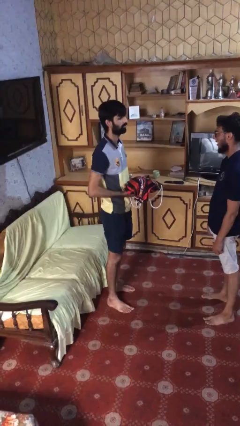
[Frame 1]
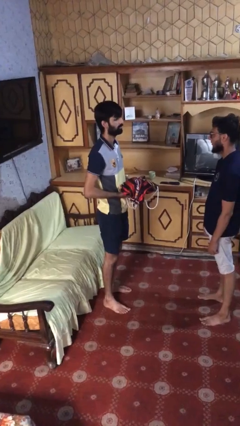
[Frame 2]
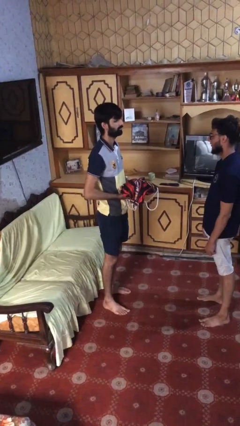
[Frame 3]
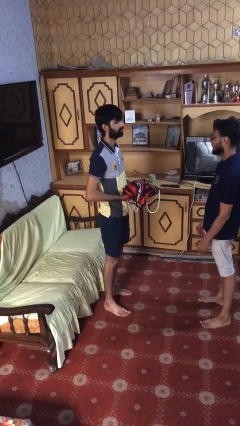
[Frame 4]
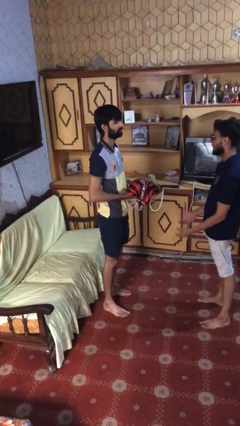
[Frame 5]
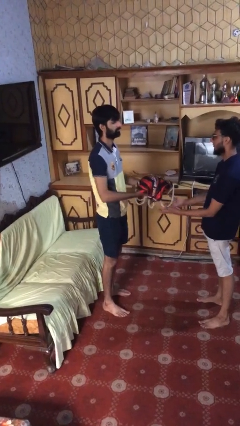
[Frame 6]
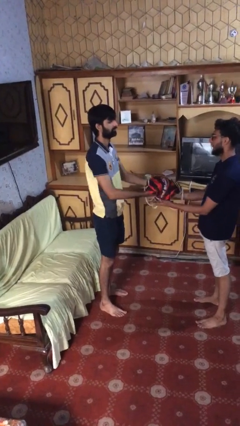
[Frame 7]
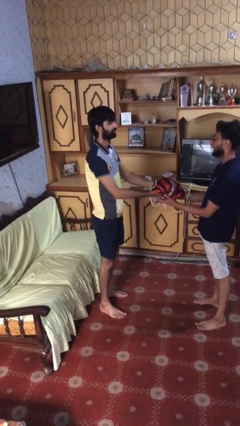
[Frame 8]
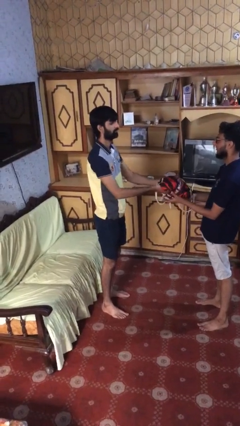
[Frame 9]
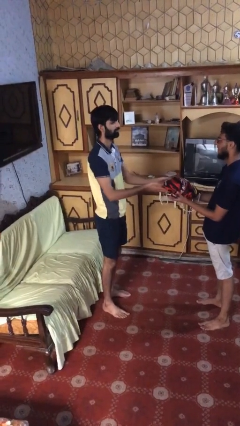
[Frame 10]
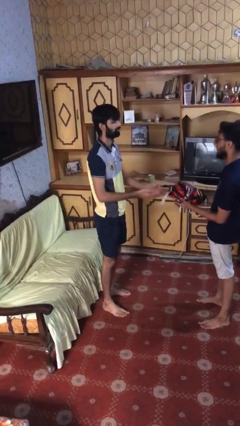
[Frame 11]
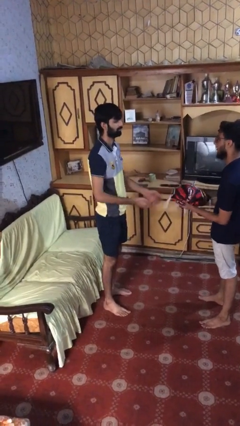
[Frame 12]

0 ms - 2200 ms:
person transfers object to person

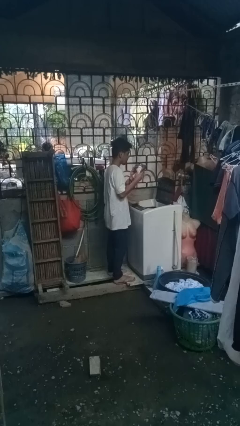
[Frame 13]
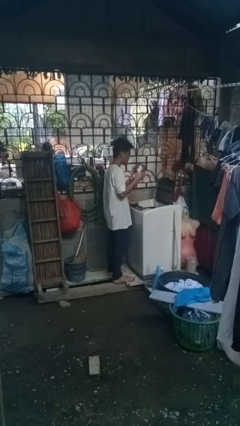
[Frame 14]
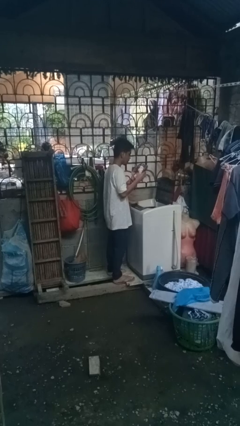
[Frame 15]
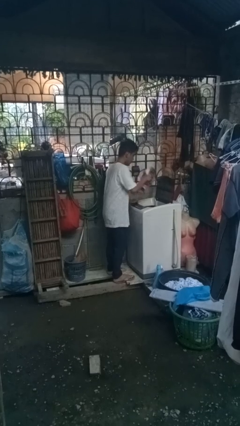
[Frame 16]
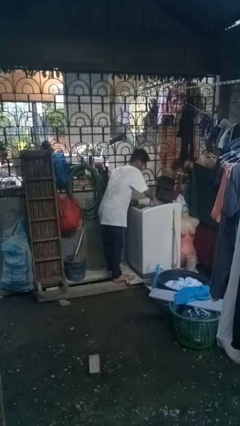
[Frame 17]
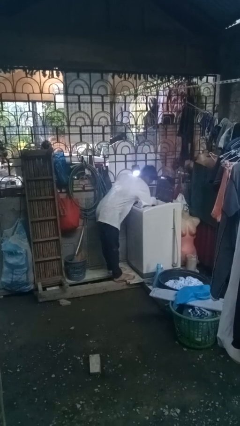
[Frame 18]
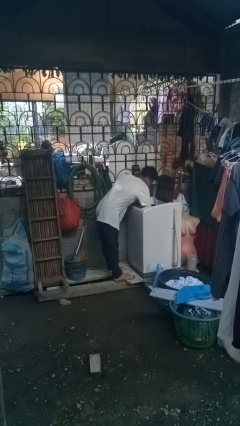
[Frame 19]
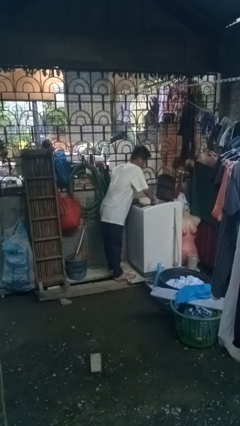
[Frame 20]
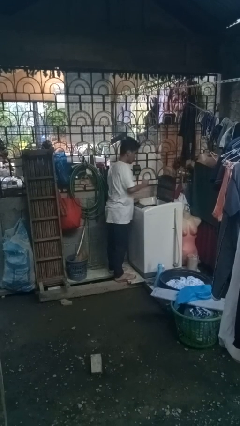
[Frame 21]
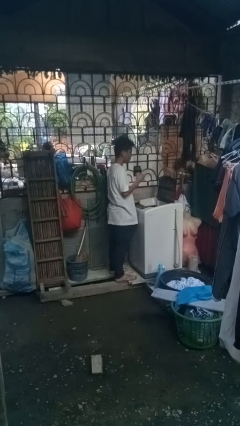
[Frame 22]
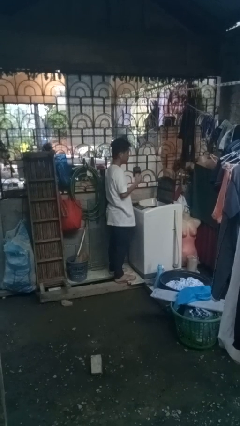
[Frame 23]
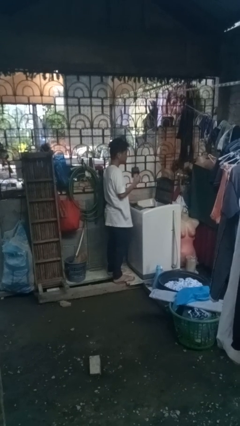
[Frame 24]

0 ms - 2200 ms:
person loads dryer

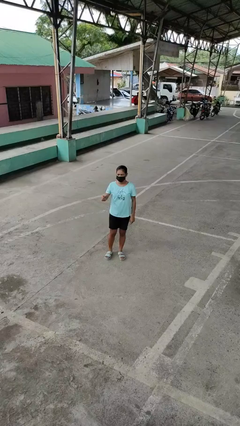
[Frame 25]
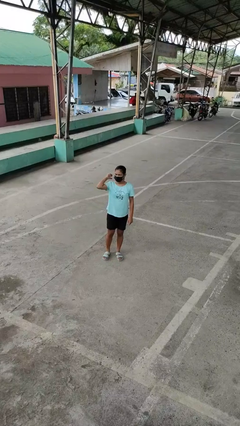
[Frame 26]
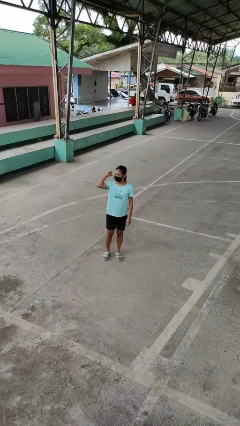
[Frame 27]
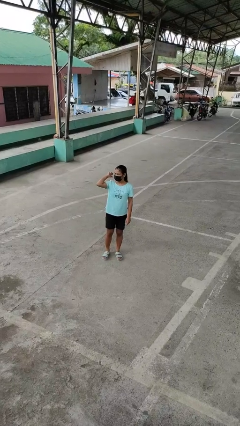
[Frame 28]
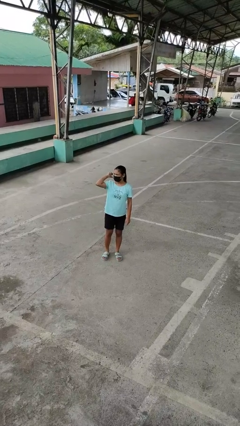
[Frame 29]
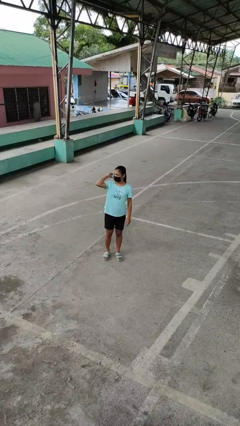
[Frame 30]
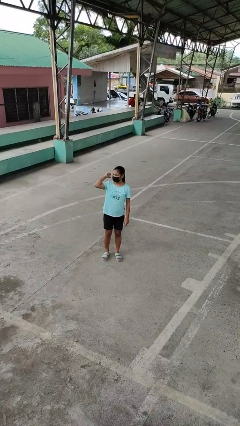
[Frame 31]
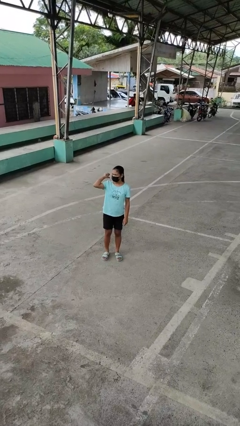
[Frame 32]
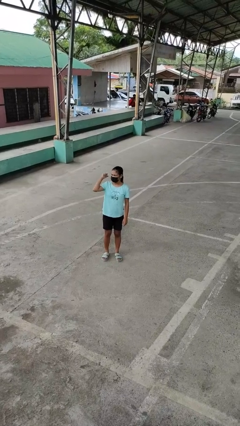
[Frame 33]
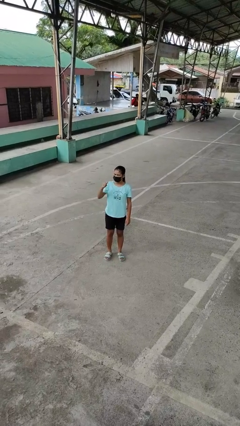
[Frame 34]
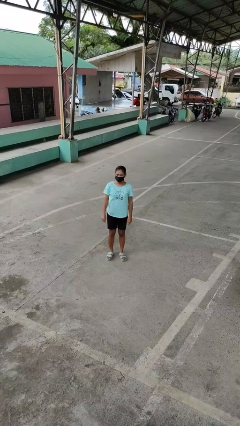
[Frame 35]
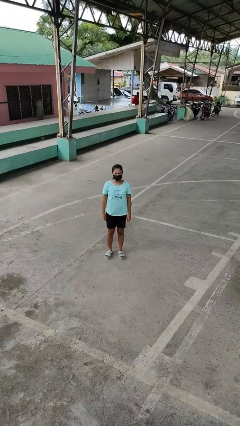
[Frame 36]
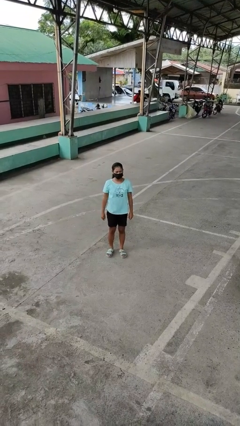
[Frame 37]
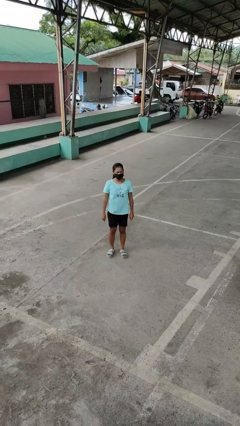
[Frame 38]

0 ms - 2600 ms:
person gestures behind me

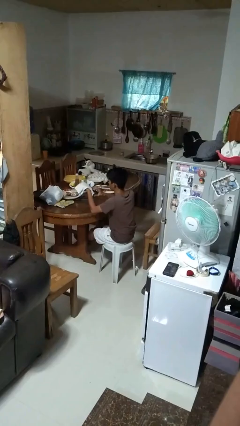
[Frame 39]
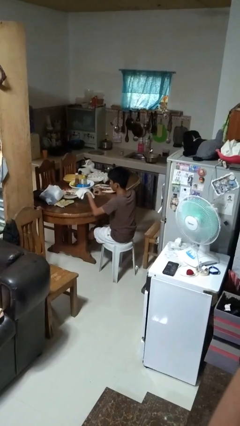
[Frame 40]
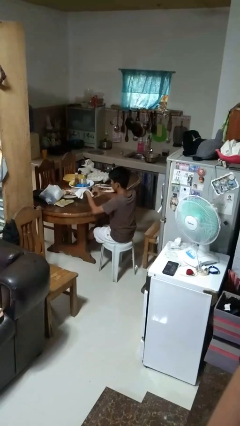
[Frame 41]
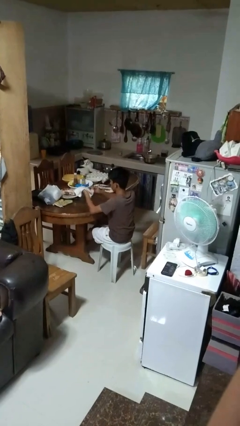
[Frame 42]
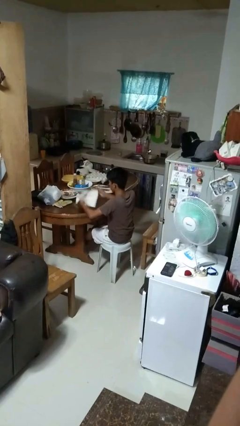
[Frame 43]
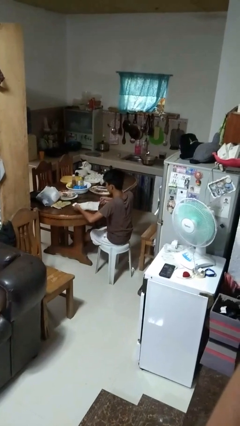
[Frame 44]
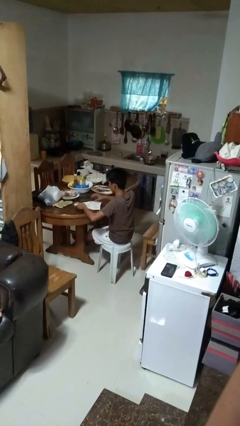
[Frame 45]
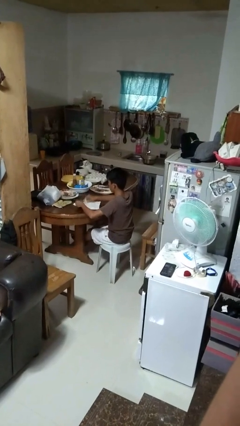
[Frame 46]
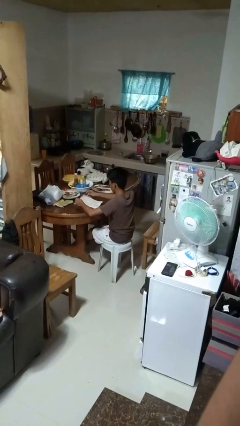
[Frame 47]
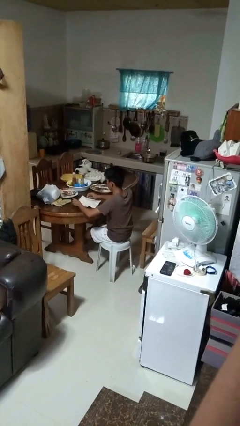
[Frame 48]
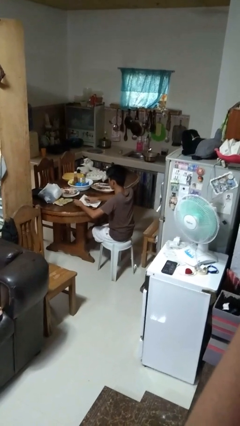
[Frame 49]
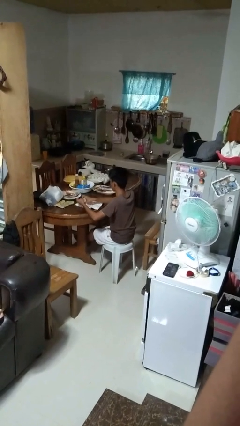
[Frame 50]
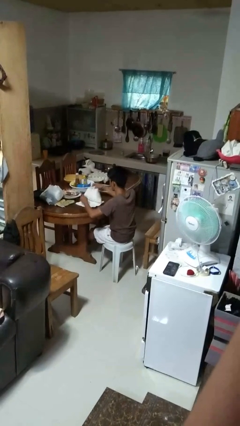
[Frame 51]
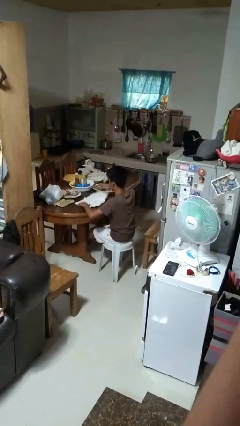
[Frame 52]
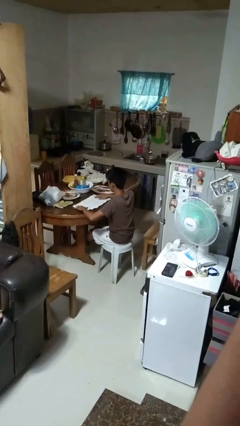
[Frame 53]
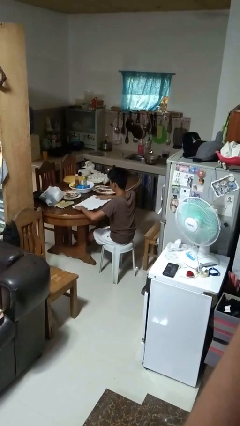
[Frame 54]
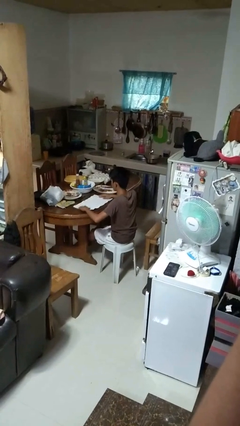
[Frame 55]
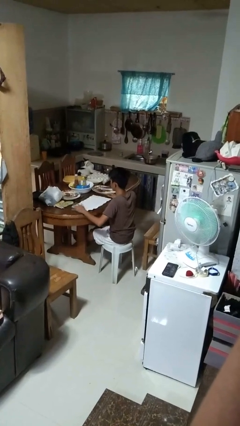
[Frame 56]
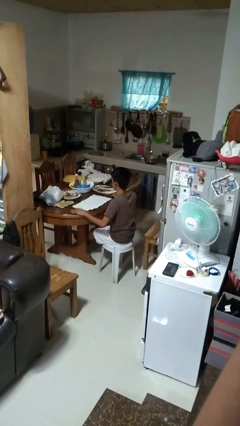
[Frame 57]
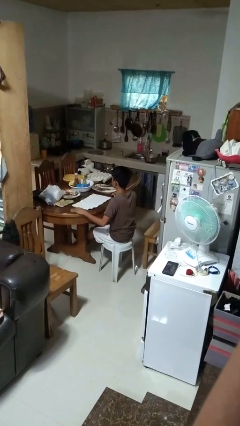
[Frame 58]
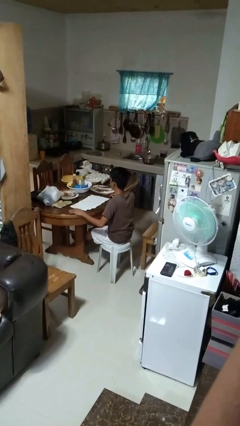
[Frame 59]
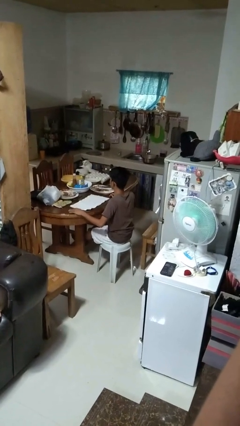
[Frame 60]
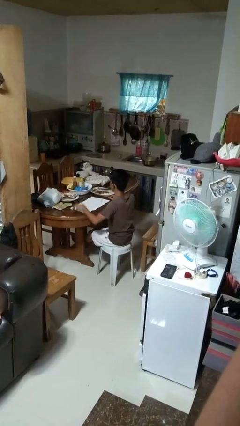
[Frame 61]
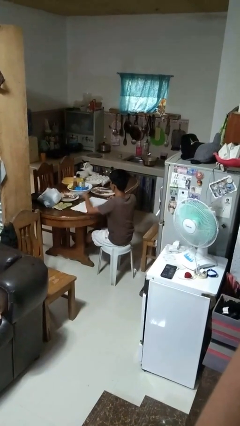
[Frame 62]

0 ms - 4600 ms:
person spreads tablecloth

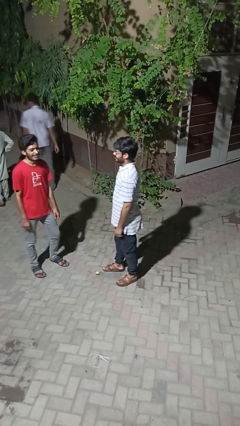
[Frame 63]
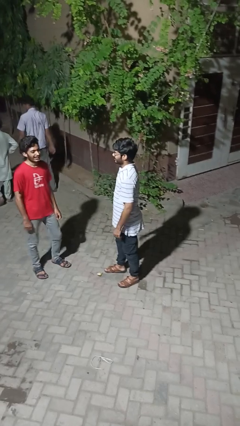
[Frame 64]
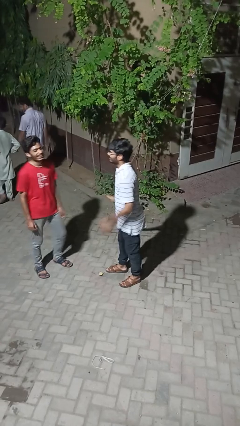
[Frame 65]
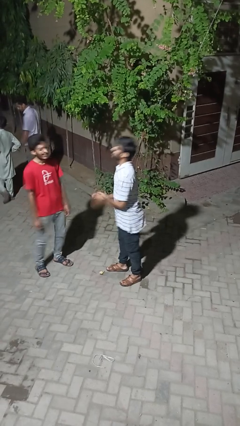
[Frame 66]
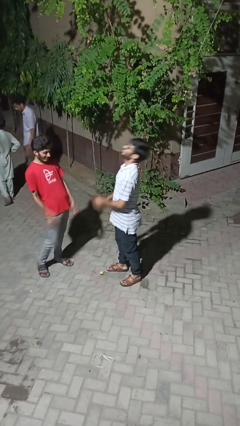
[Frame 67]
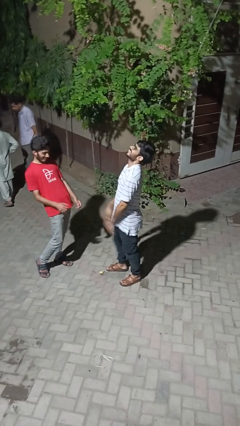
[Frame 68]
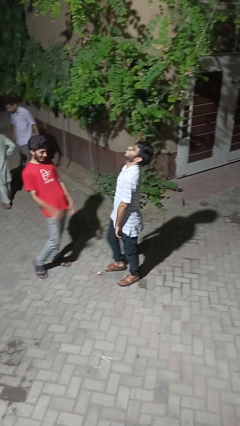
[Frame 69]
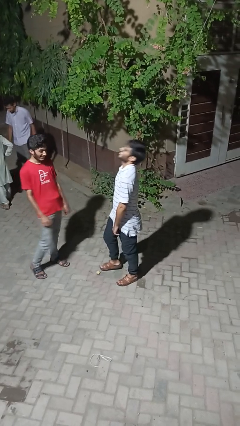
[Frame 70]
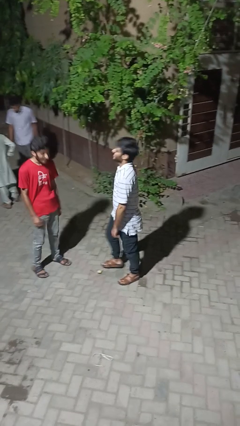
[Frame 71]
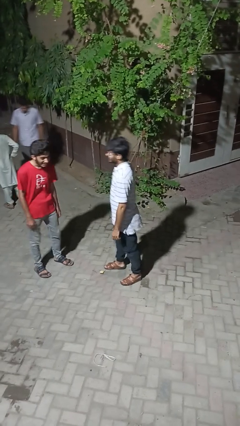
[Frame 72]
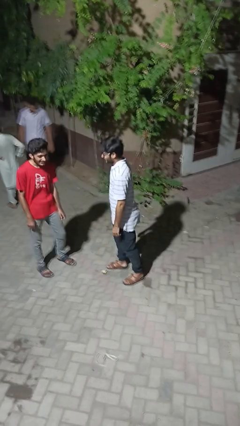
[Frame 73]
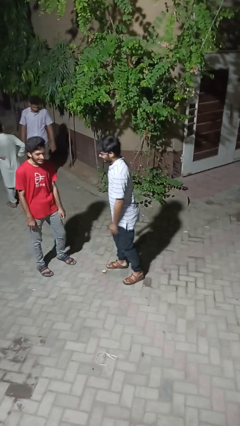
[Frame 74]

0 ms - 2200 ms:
person laughs with person

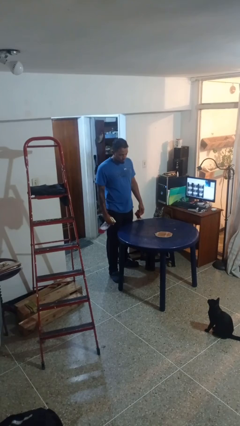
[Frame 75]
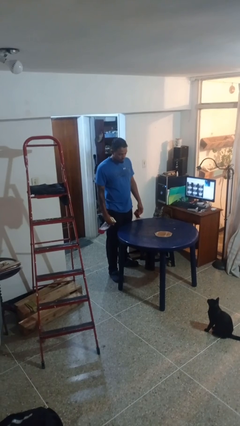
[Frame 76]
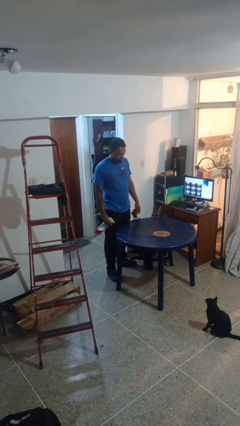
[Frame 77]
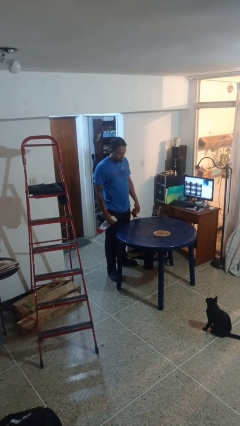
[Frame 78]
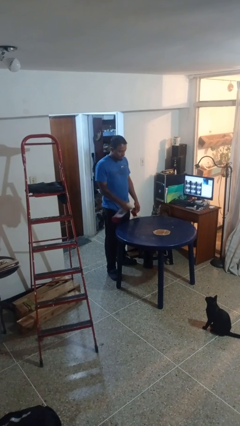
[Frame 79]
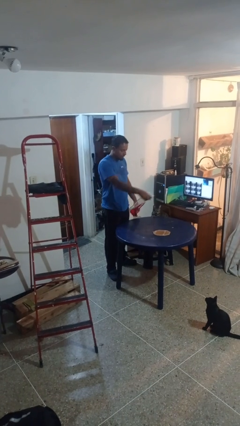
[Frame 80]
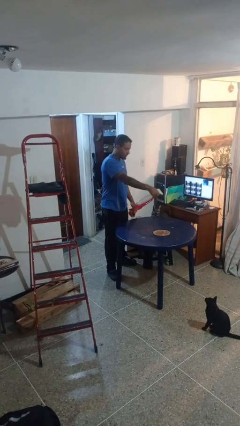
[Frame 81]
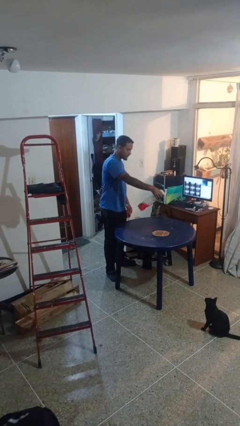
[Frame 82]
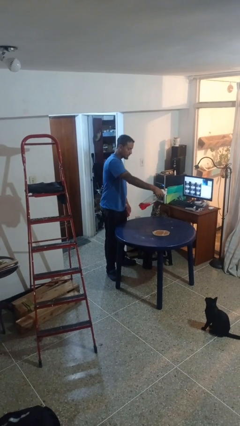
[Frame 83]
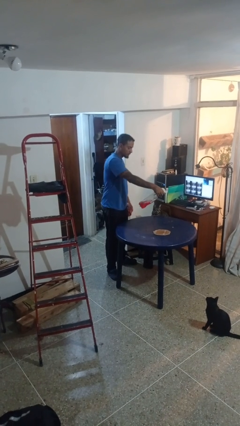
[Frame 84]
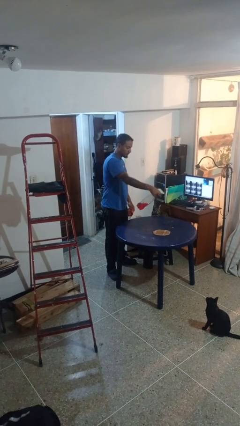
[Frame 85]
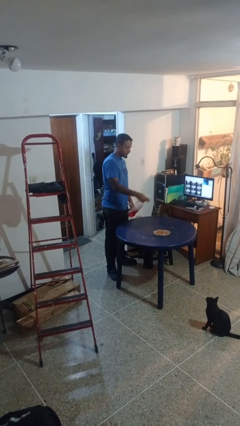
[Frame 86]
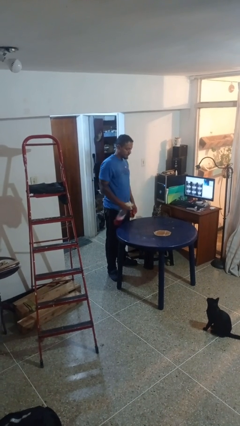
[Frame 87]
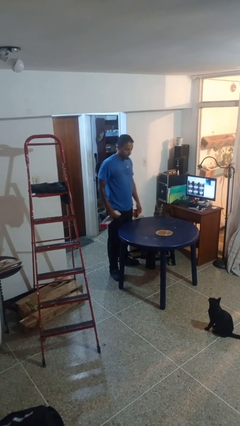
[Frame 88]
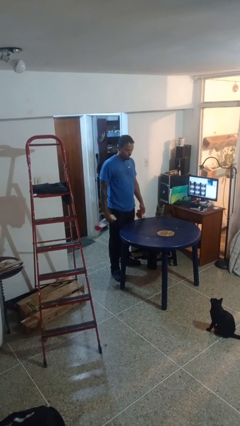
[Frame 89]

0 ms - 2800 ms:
person sprays from bottle

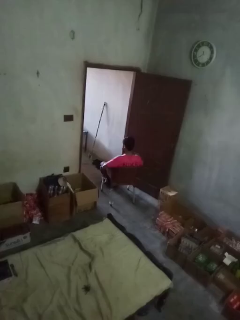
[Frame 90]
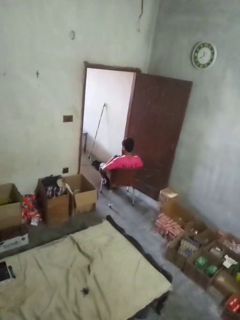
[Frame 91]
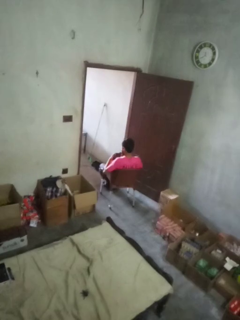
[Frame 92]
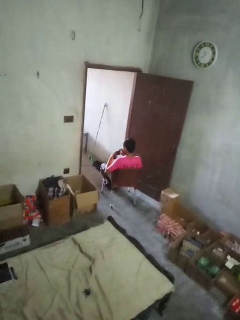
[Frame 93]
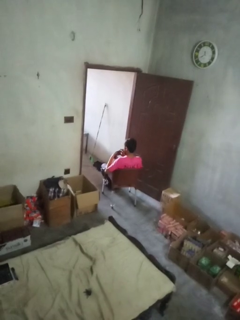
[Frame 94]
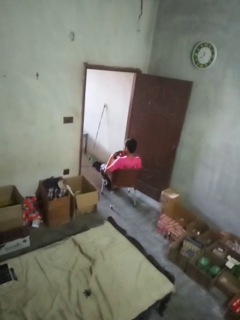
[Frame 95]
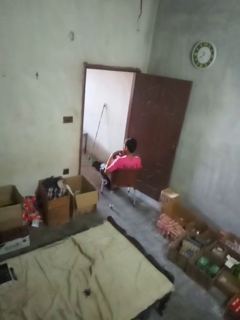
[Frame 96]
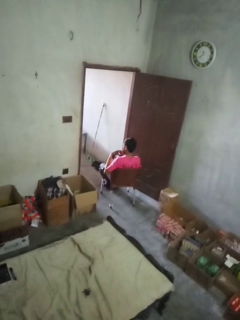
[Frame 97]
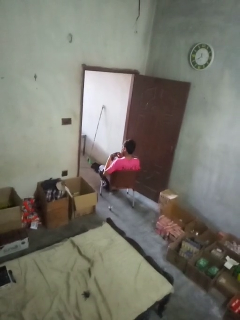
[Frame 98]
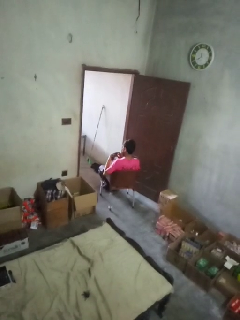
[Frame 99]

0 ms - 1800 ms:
person searches in purse
